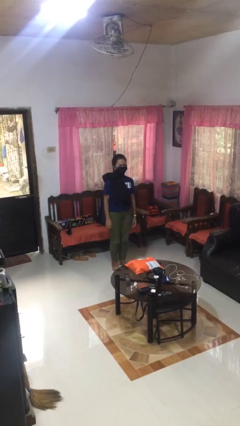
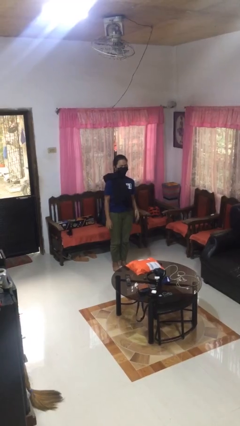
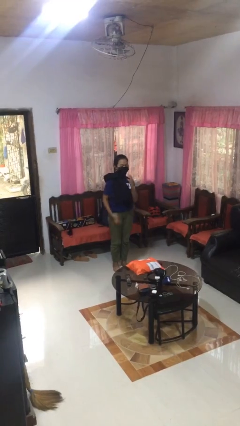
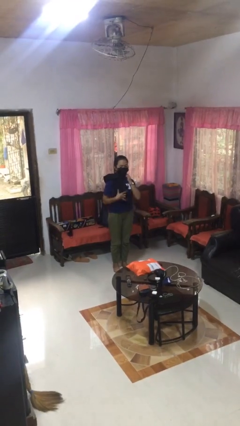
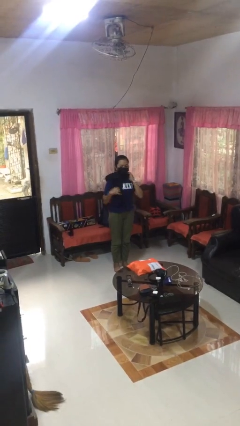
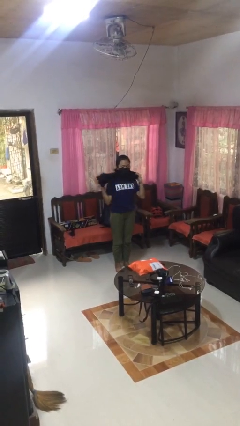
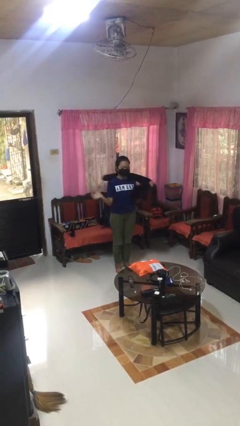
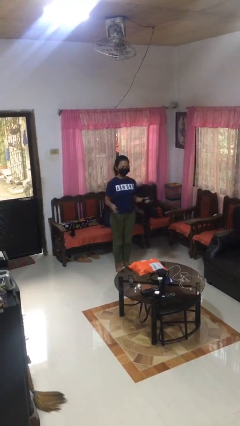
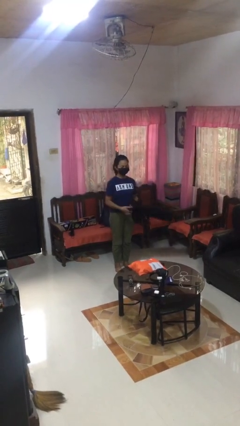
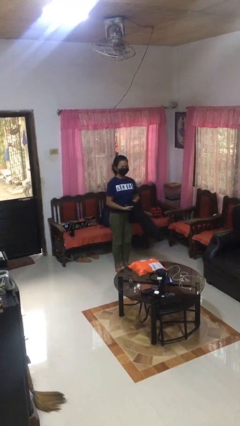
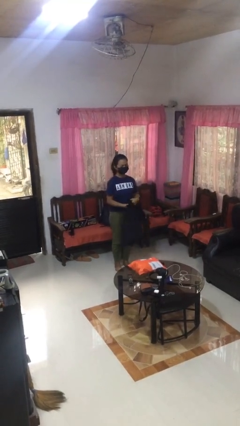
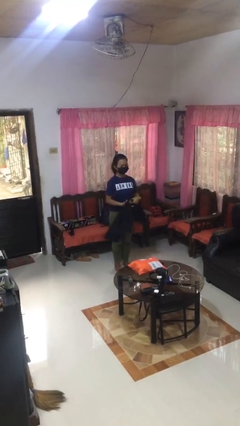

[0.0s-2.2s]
person takes off scarf

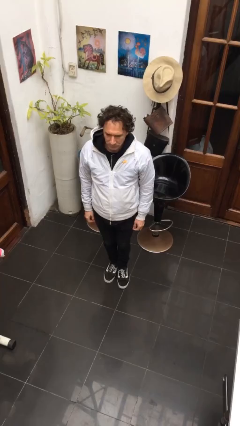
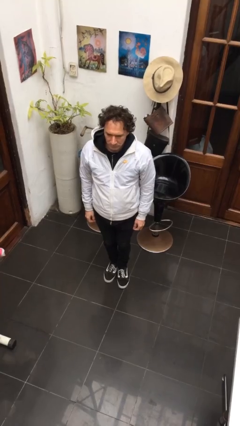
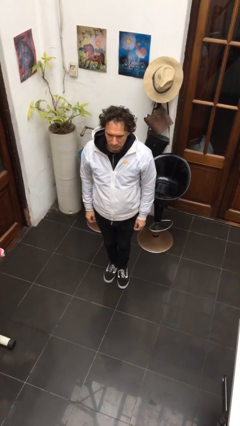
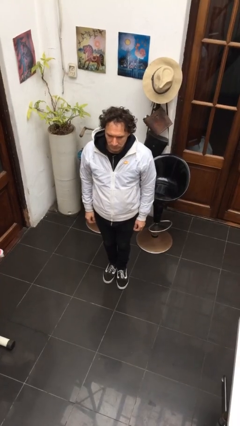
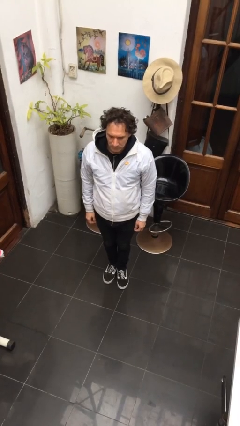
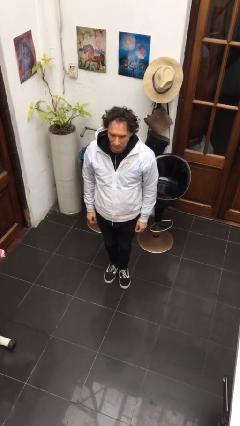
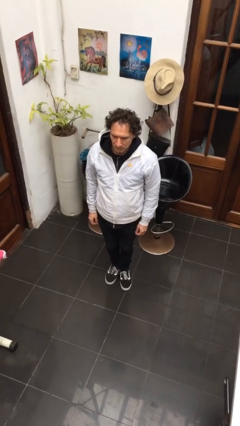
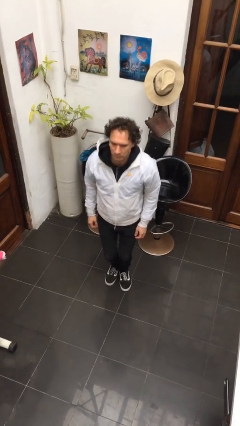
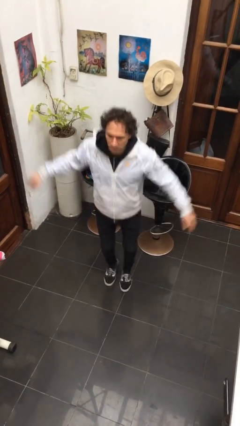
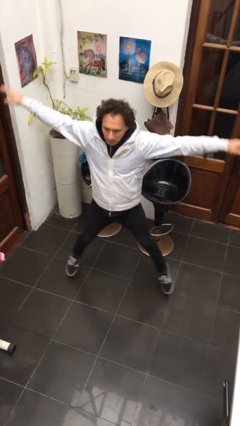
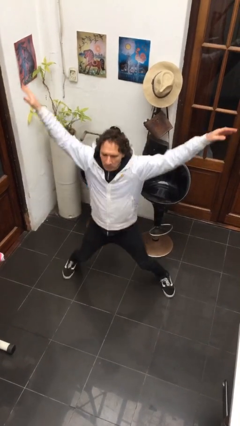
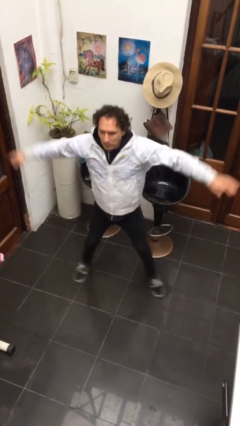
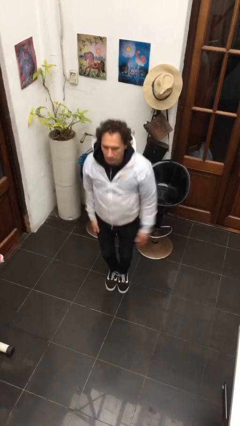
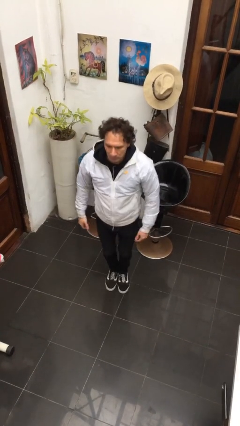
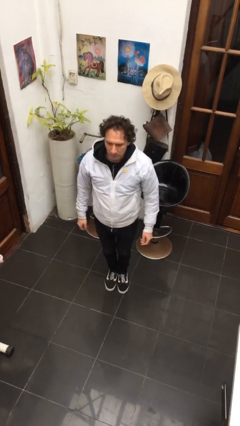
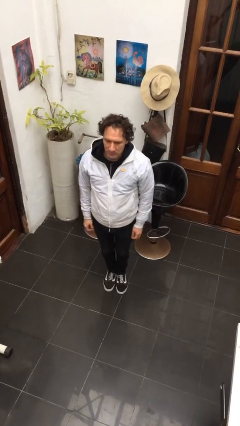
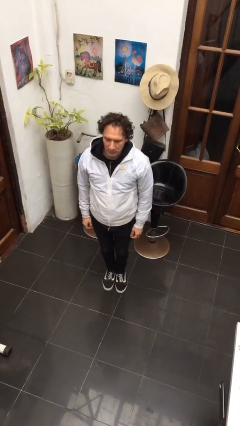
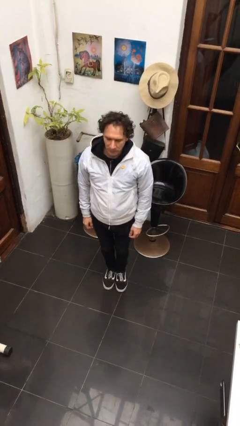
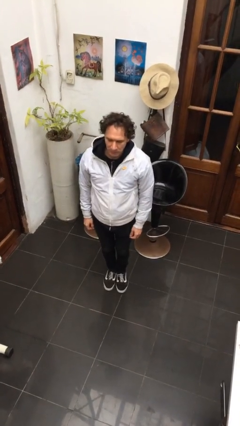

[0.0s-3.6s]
person exercises with jumping jacks

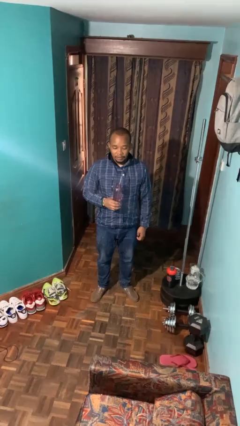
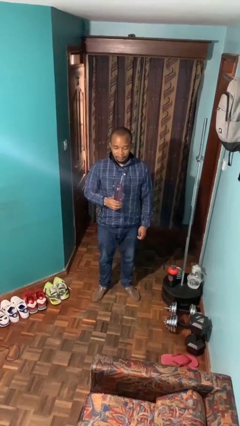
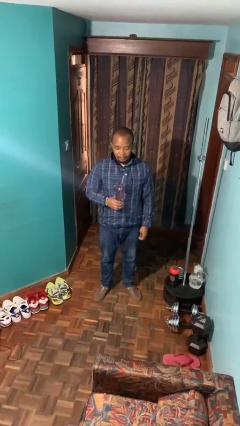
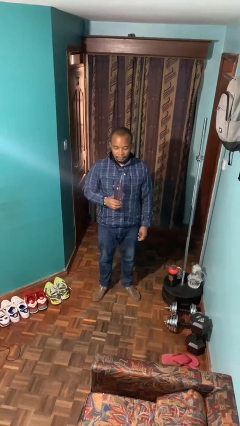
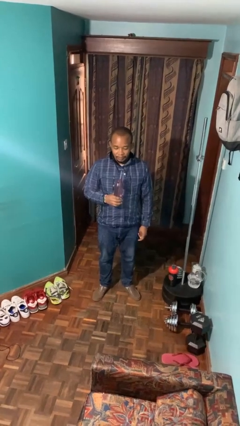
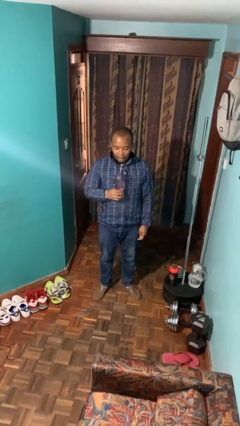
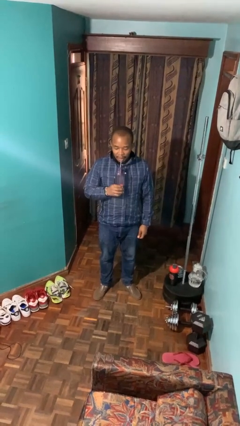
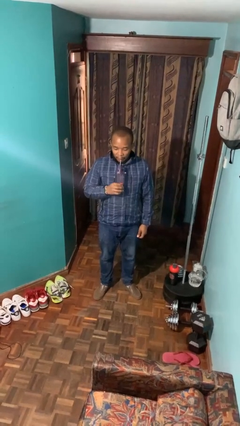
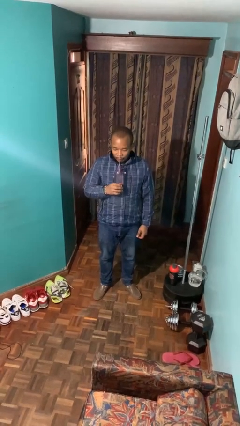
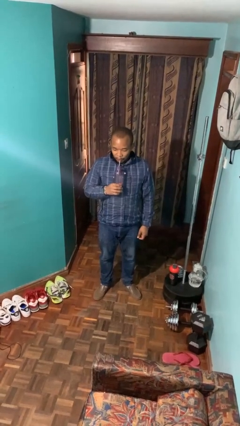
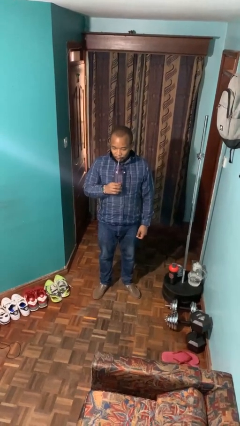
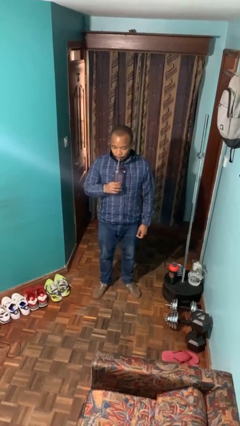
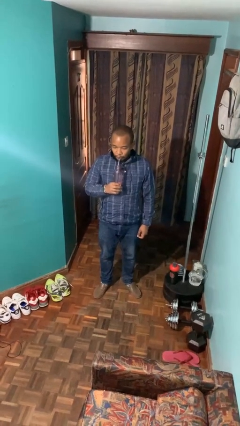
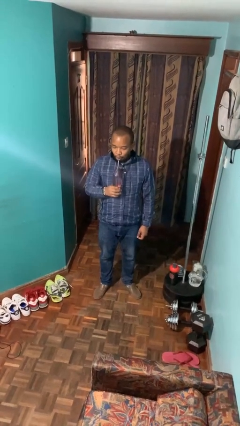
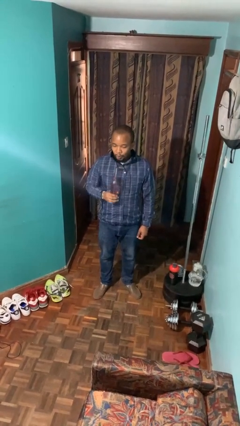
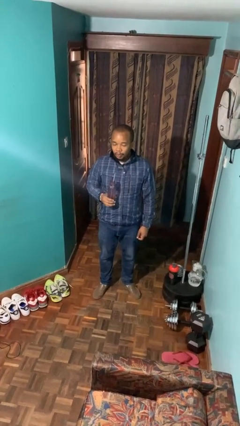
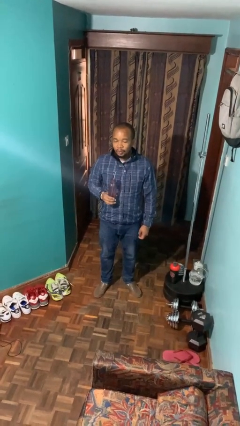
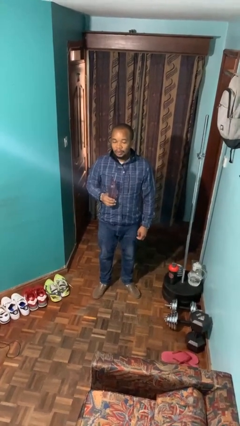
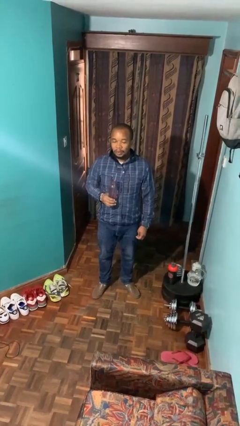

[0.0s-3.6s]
person drinks from straw

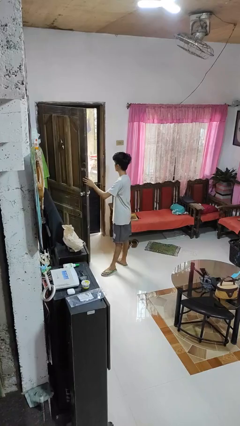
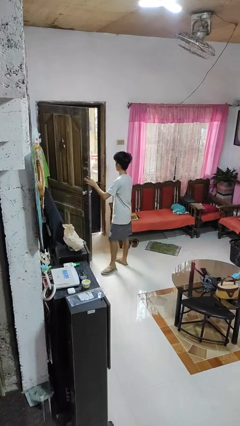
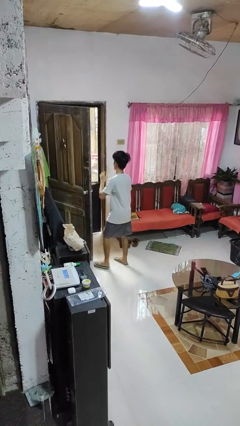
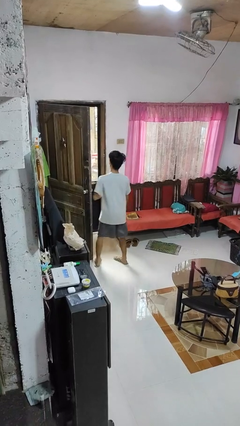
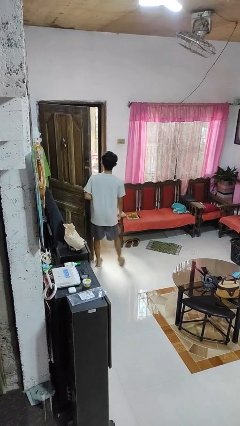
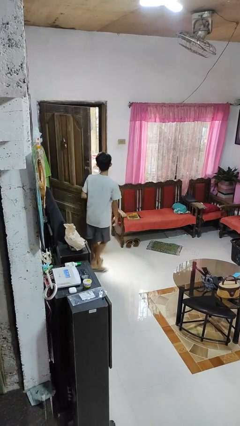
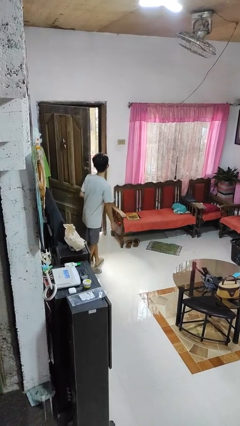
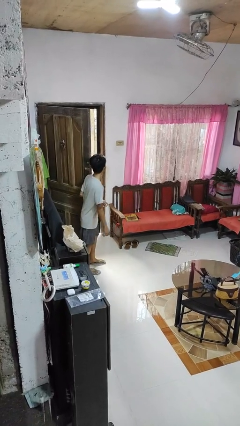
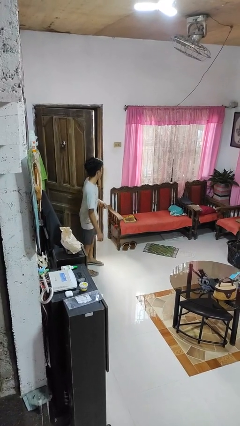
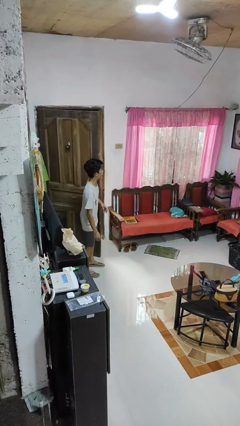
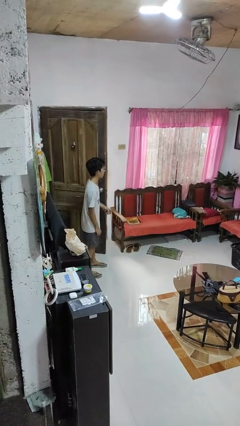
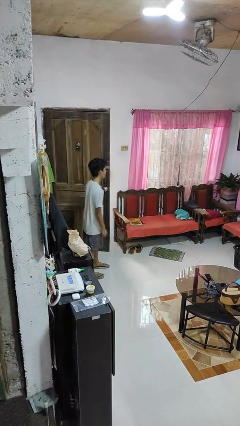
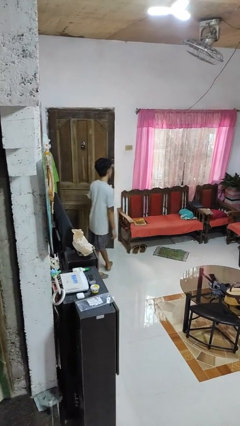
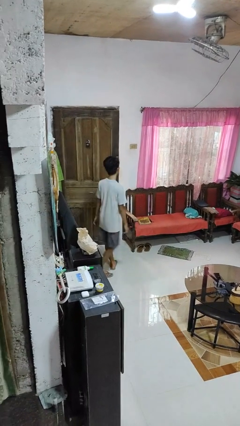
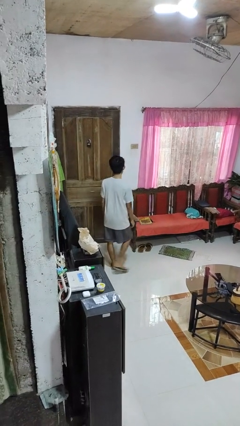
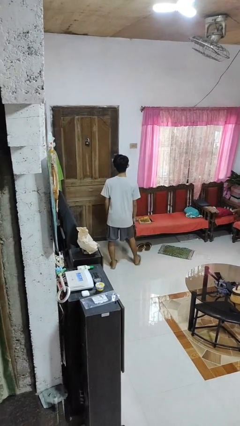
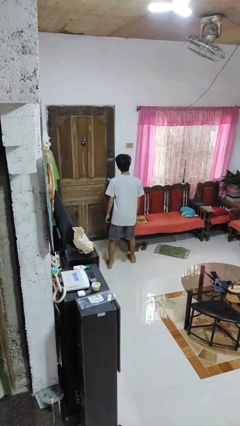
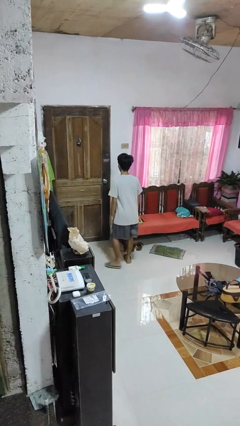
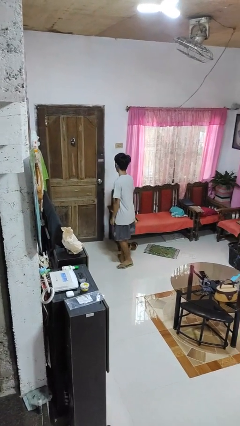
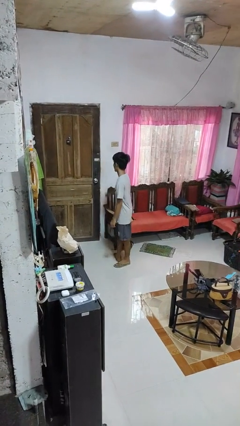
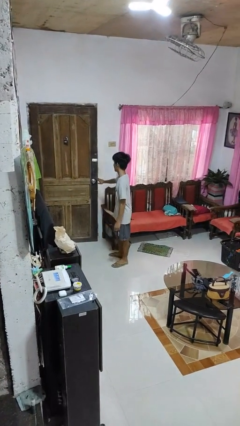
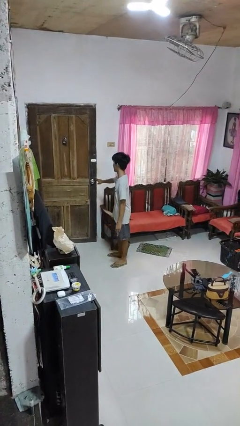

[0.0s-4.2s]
person closes door with hip

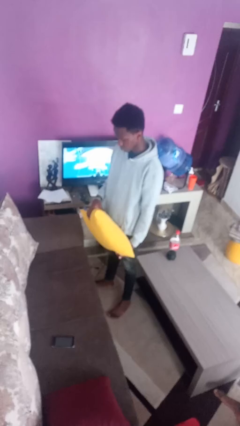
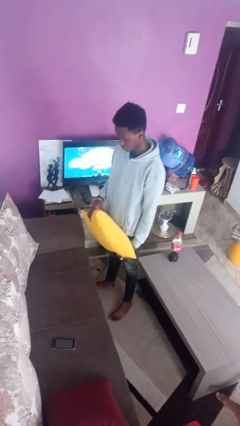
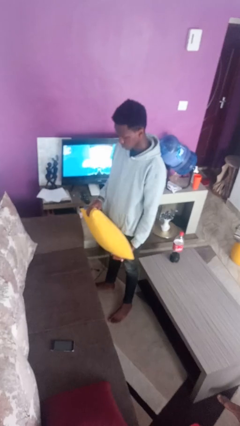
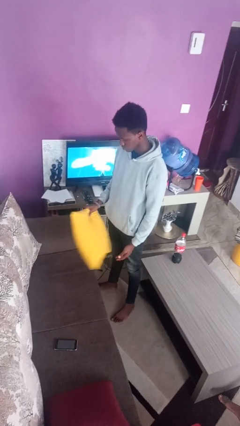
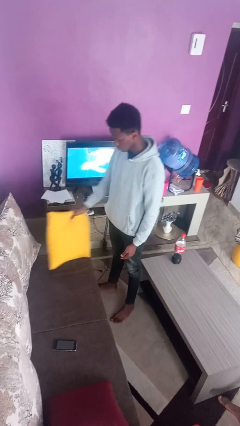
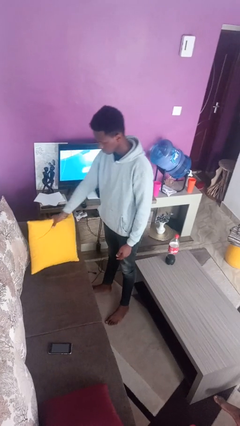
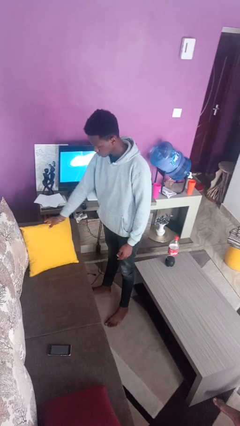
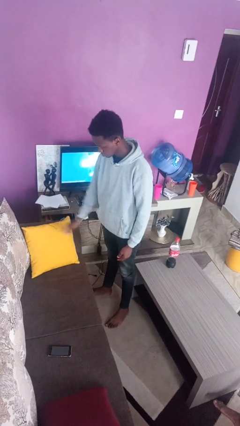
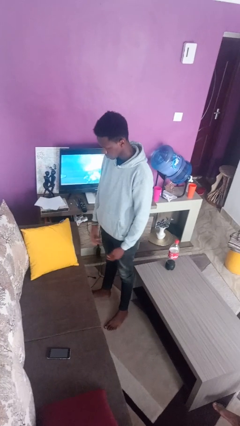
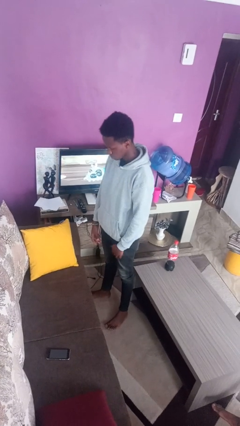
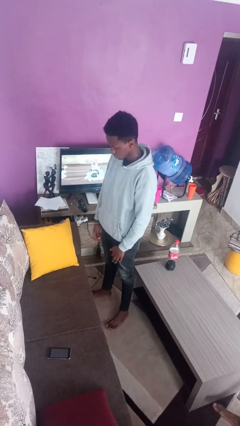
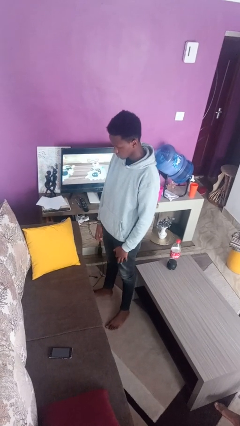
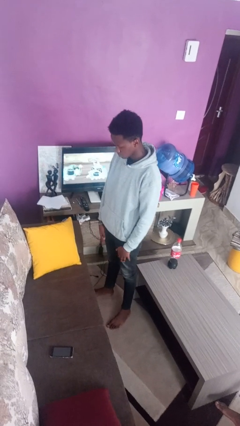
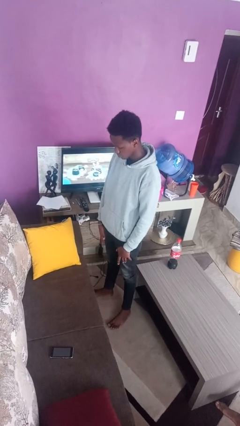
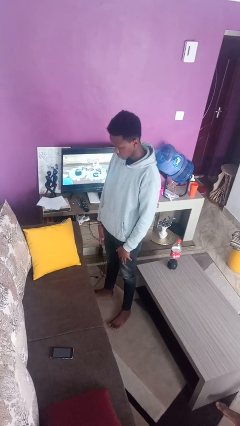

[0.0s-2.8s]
person puts down object on couch

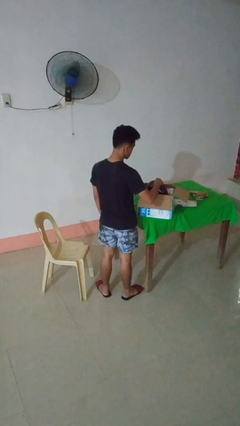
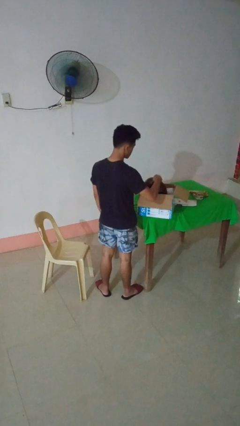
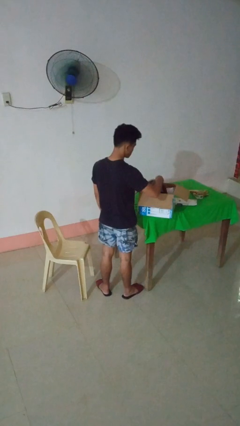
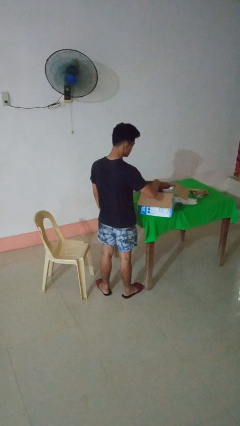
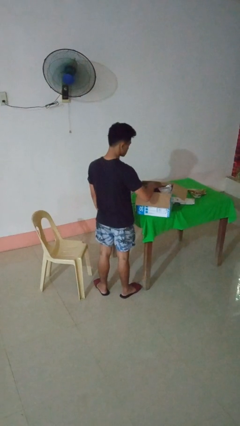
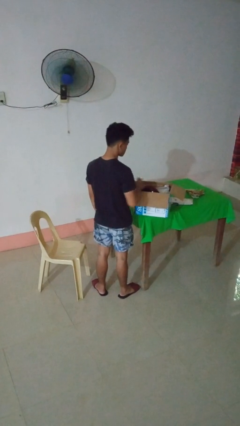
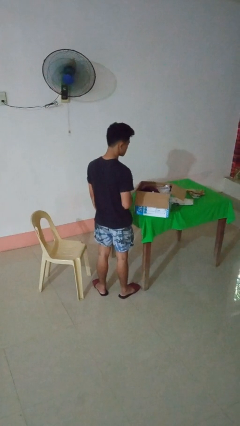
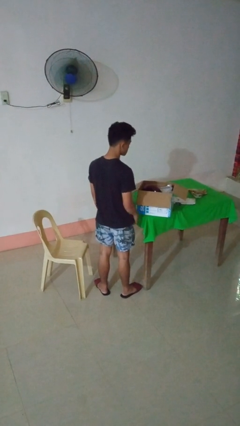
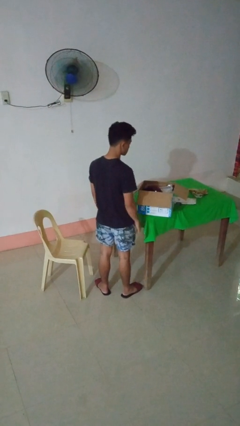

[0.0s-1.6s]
person puts object into box
